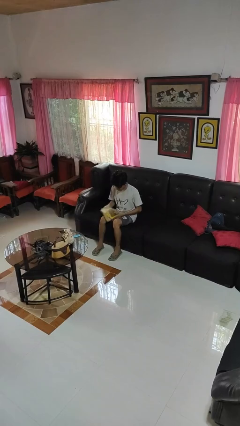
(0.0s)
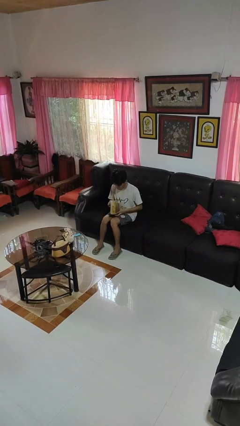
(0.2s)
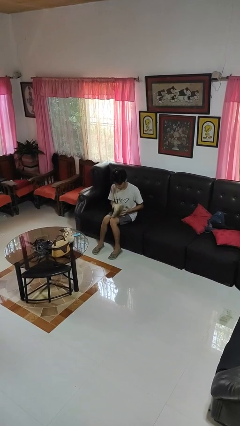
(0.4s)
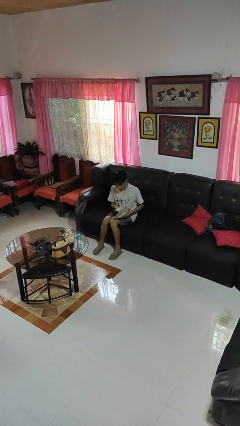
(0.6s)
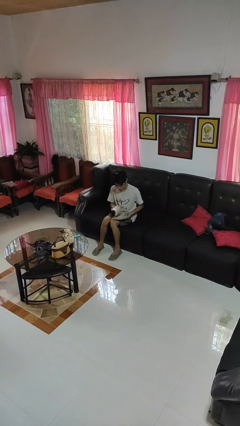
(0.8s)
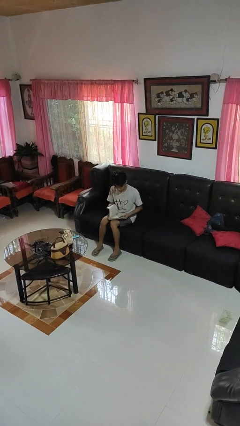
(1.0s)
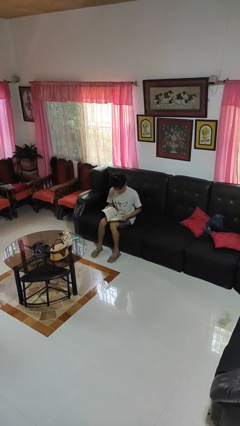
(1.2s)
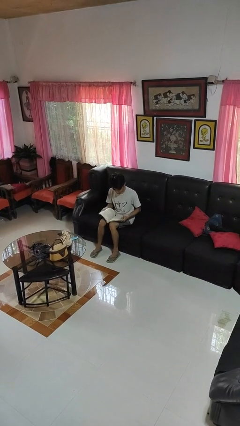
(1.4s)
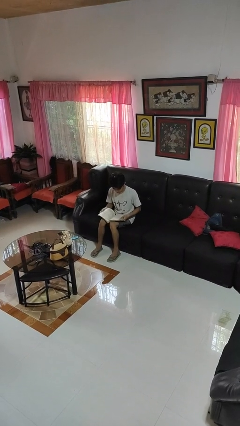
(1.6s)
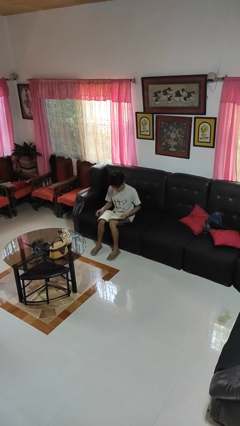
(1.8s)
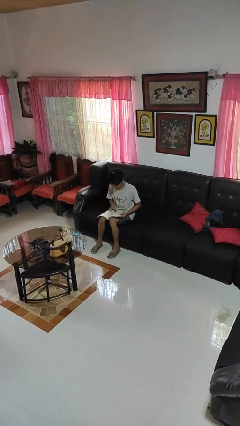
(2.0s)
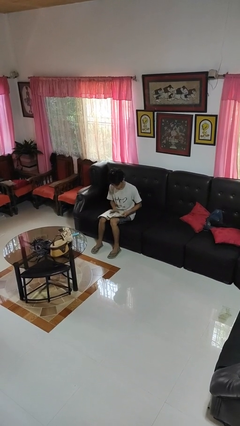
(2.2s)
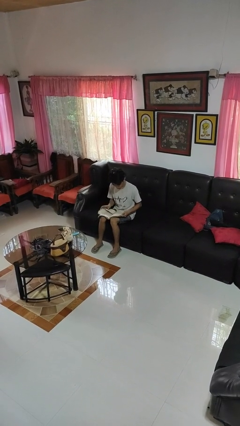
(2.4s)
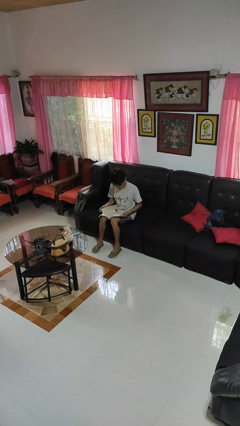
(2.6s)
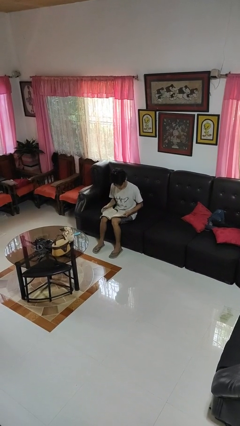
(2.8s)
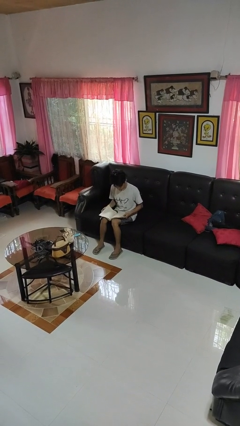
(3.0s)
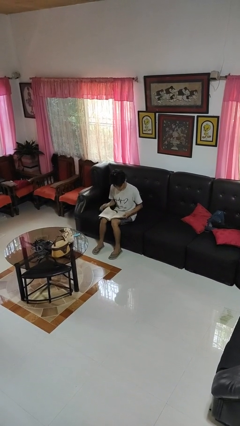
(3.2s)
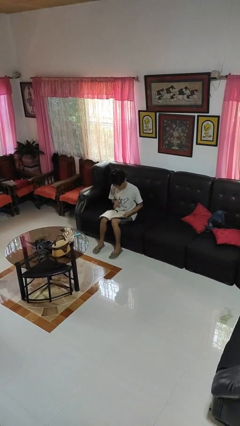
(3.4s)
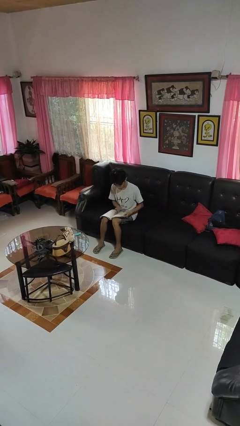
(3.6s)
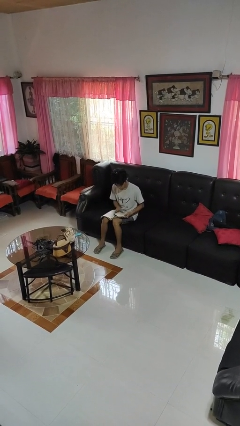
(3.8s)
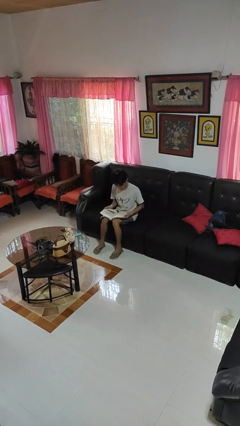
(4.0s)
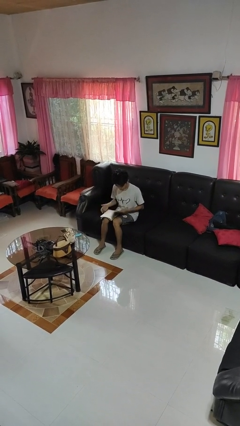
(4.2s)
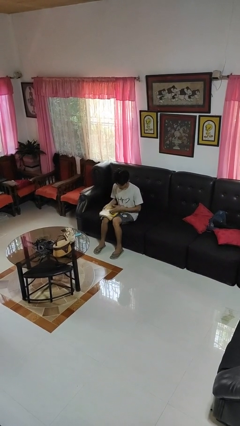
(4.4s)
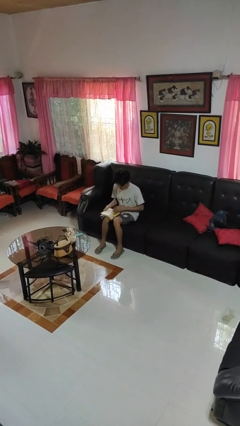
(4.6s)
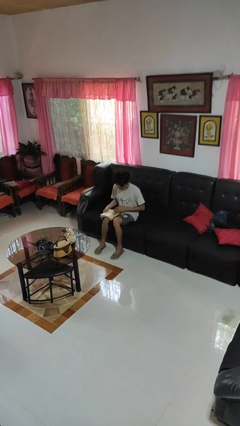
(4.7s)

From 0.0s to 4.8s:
person reads book

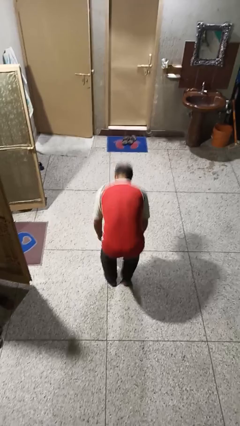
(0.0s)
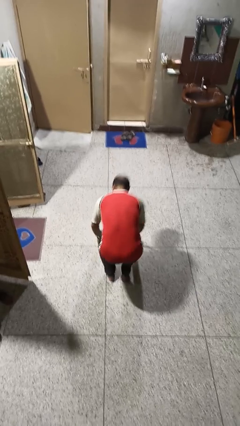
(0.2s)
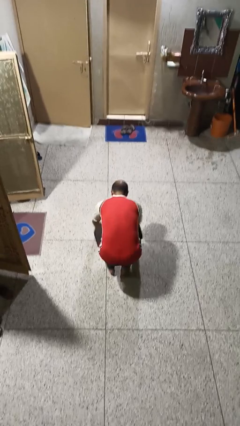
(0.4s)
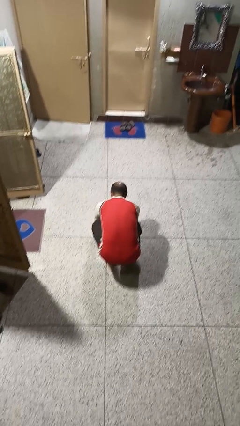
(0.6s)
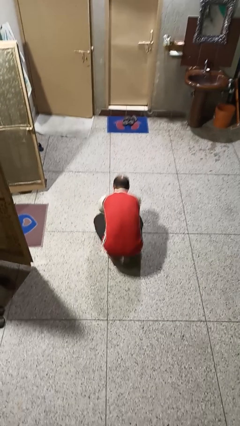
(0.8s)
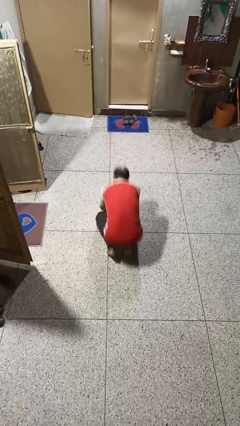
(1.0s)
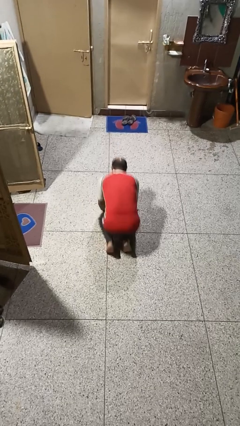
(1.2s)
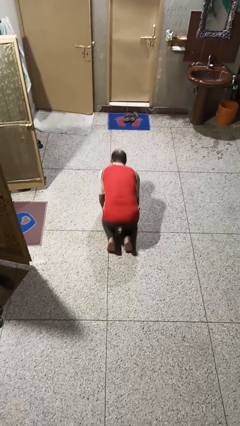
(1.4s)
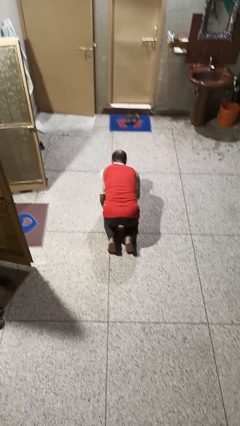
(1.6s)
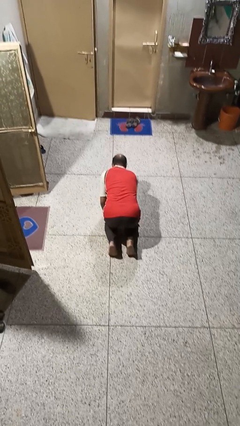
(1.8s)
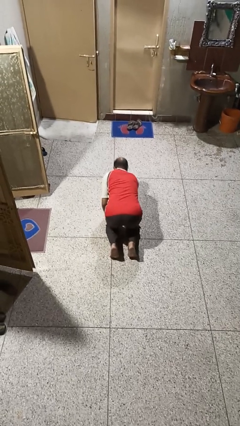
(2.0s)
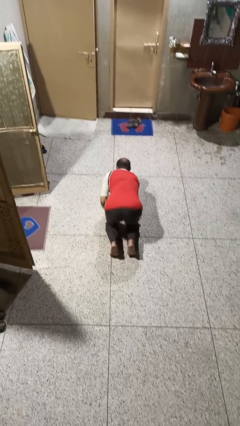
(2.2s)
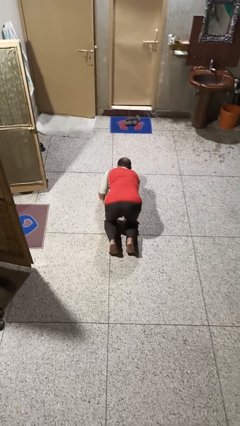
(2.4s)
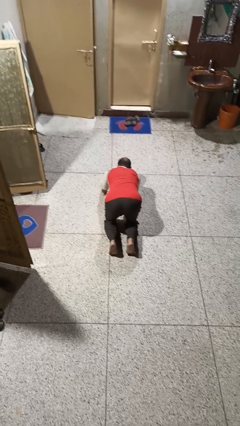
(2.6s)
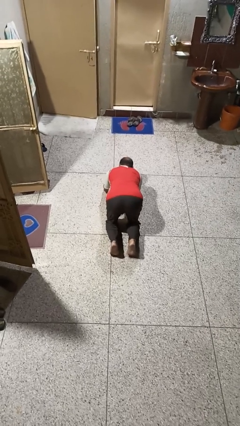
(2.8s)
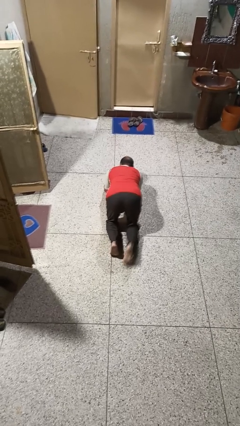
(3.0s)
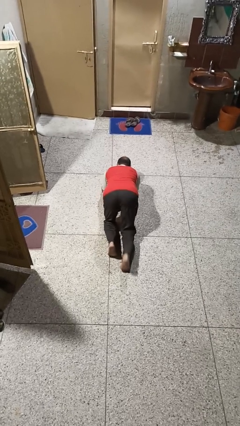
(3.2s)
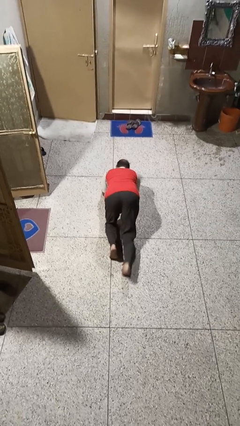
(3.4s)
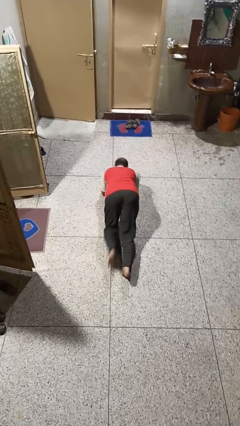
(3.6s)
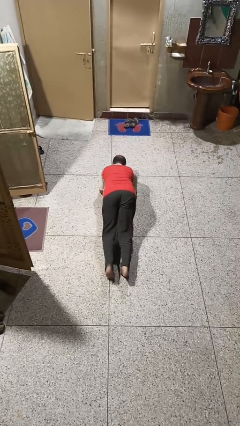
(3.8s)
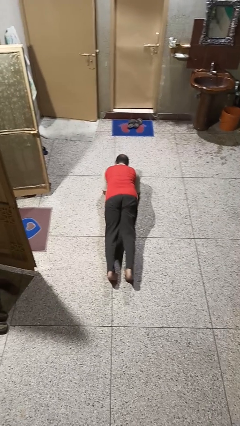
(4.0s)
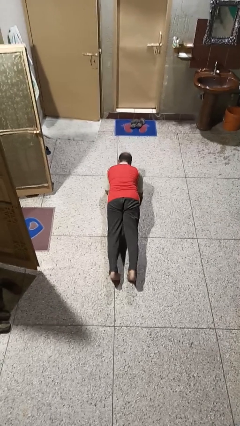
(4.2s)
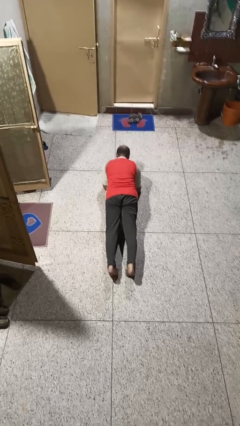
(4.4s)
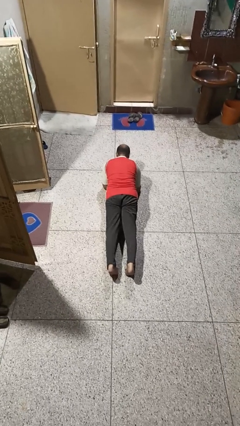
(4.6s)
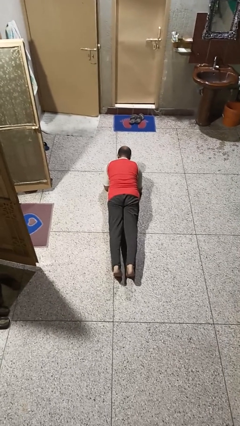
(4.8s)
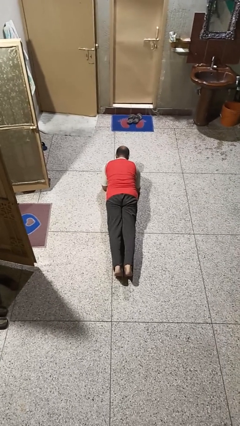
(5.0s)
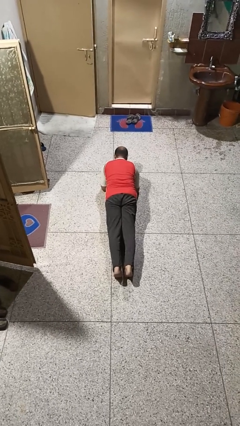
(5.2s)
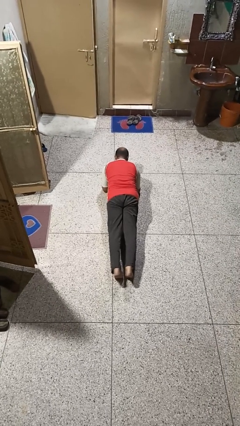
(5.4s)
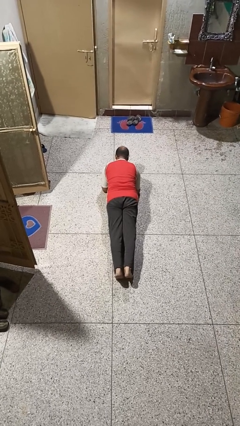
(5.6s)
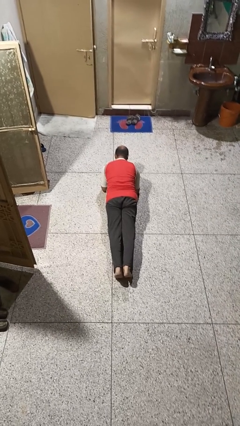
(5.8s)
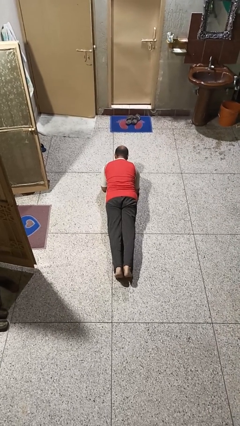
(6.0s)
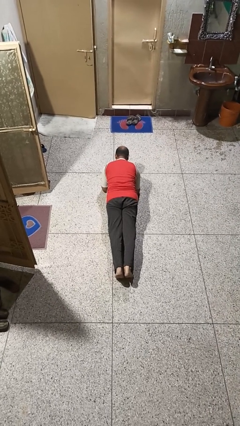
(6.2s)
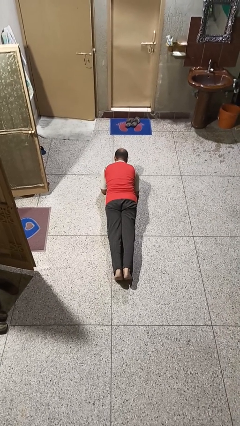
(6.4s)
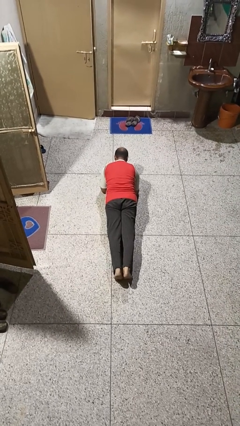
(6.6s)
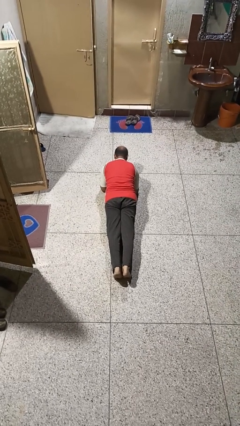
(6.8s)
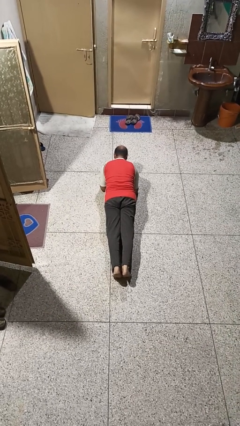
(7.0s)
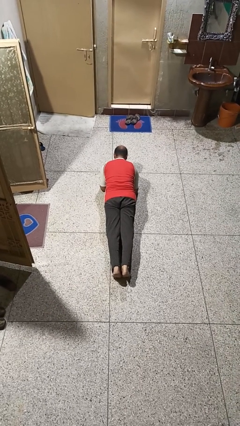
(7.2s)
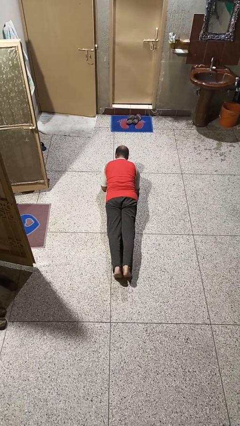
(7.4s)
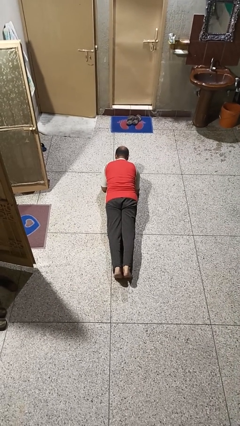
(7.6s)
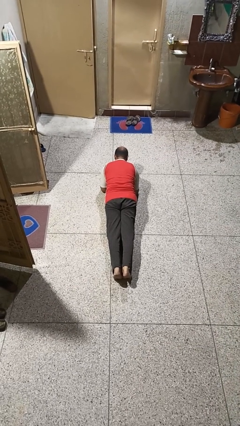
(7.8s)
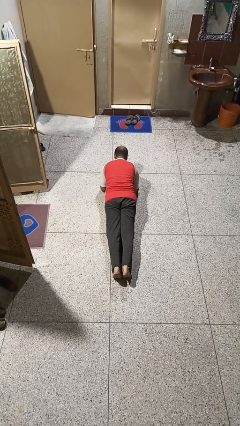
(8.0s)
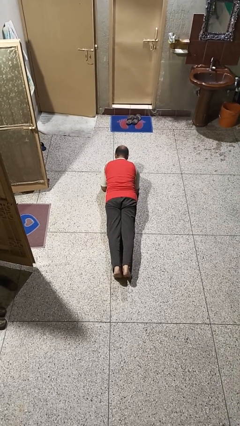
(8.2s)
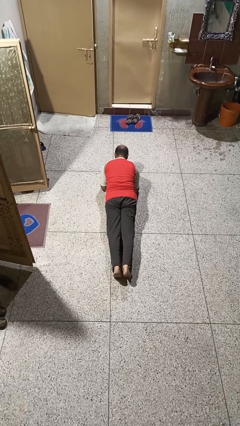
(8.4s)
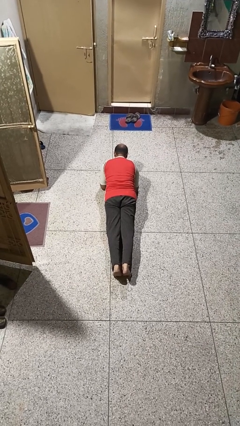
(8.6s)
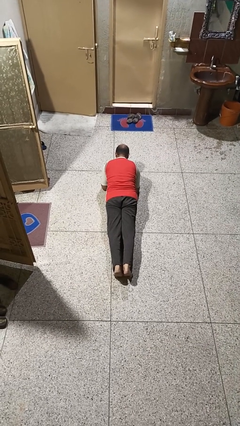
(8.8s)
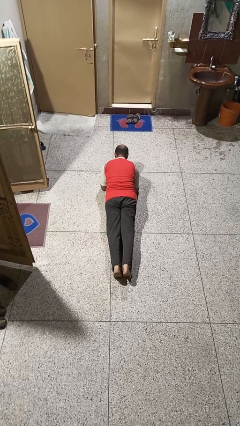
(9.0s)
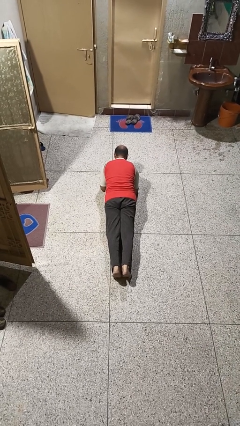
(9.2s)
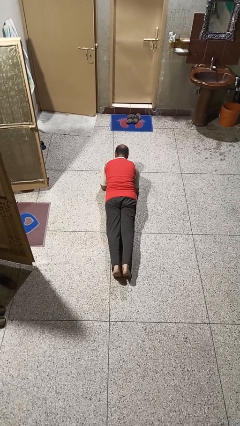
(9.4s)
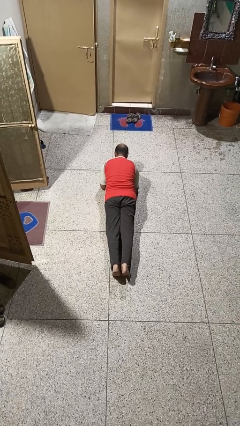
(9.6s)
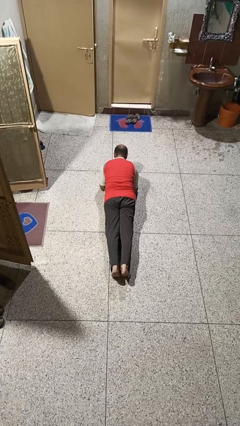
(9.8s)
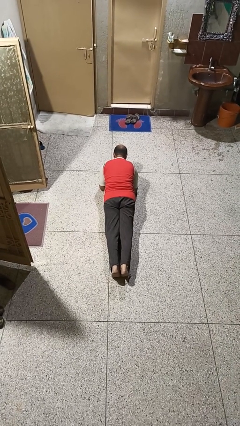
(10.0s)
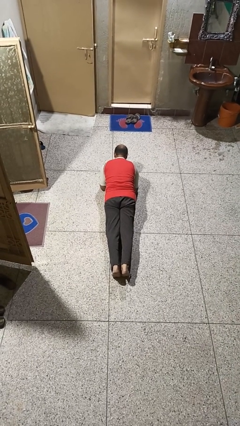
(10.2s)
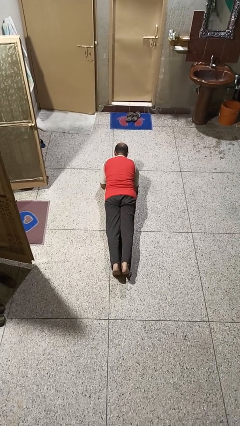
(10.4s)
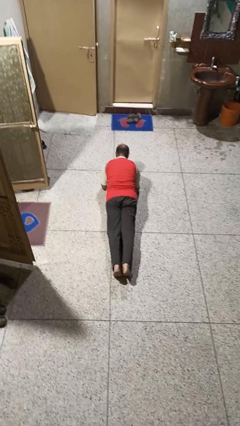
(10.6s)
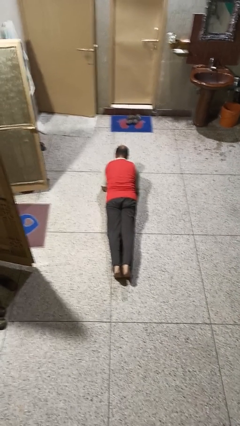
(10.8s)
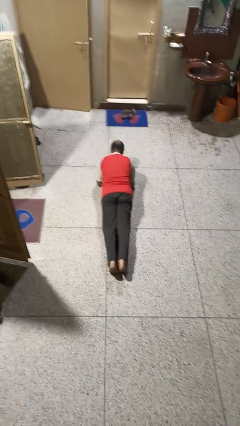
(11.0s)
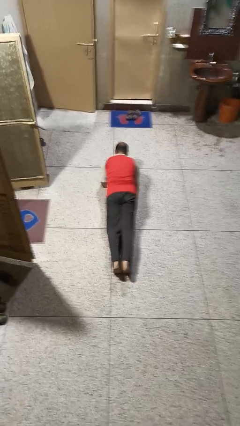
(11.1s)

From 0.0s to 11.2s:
person exercises with plank

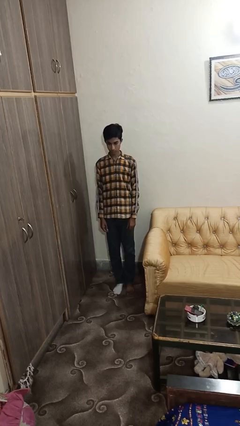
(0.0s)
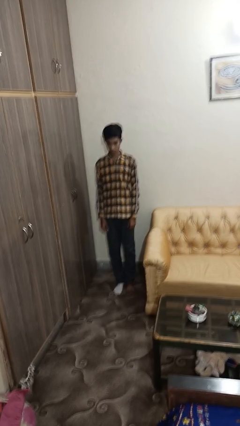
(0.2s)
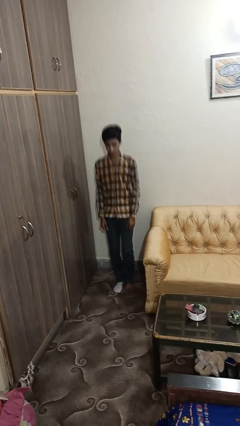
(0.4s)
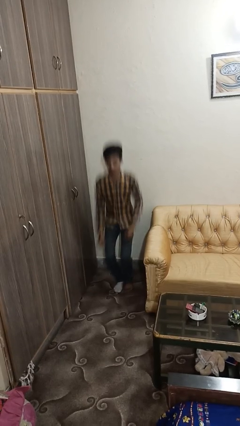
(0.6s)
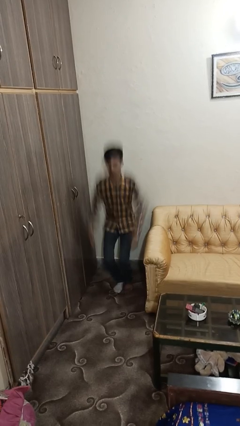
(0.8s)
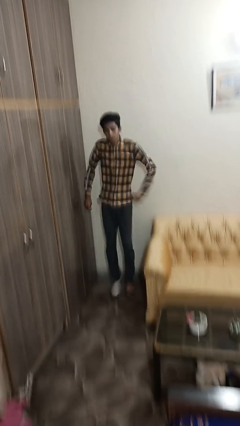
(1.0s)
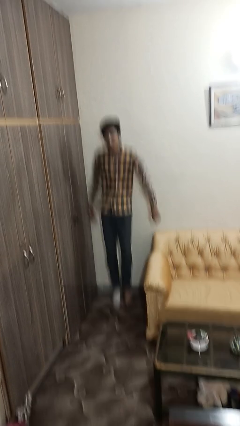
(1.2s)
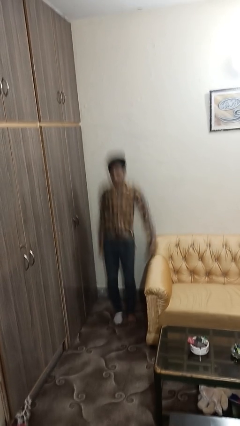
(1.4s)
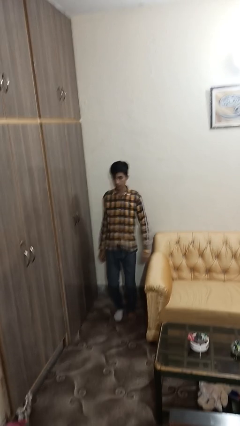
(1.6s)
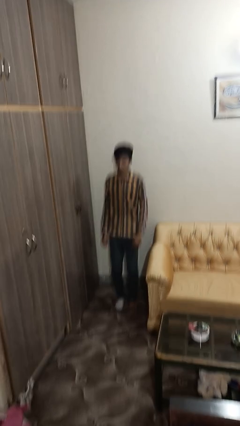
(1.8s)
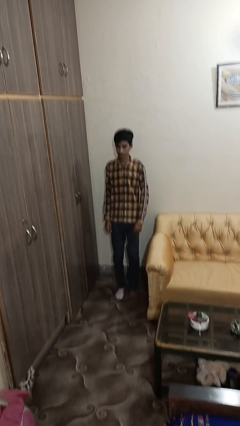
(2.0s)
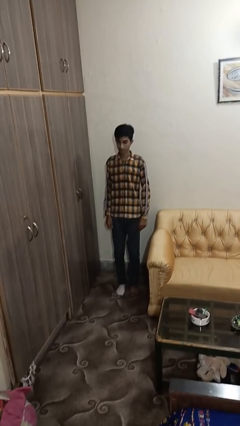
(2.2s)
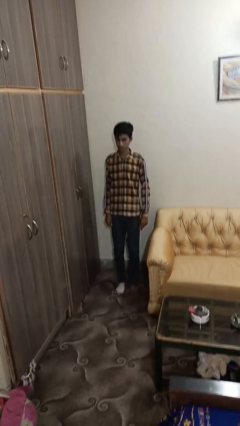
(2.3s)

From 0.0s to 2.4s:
person jumps
